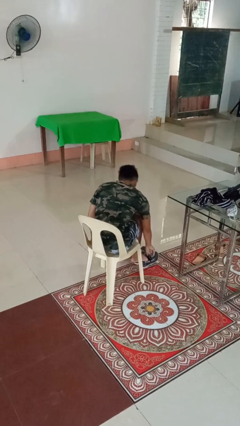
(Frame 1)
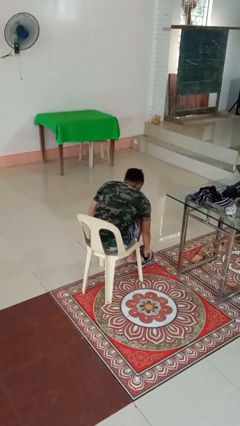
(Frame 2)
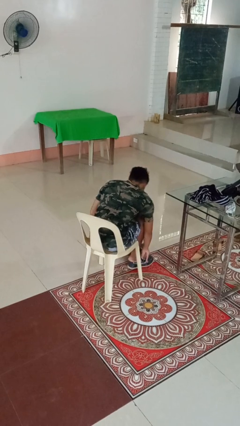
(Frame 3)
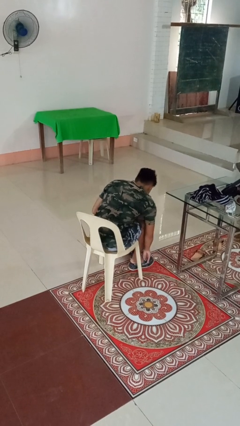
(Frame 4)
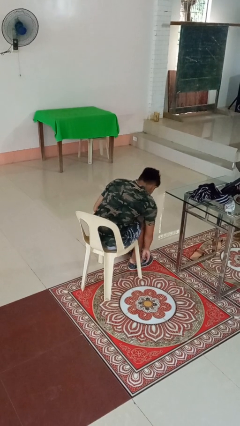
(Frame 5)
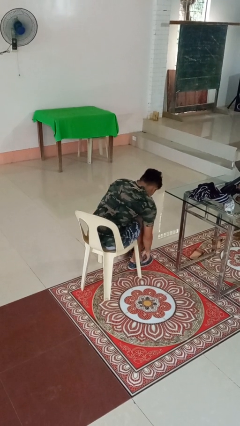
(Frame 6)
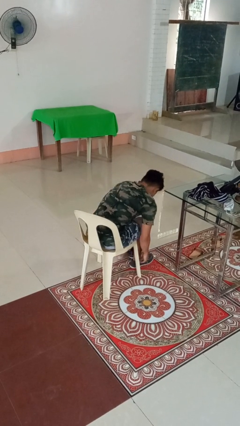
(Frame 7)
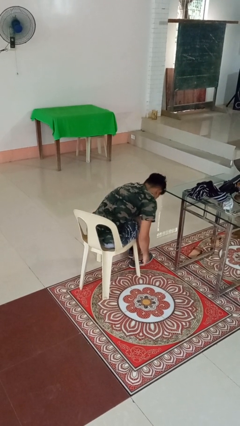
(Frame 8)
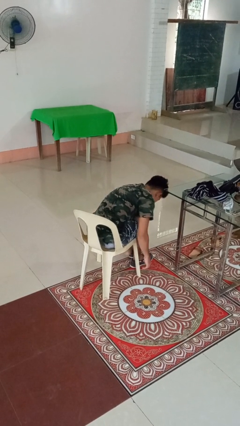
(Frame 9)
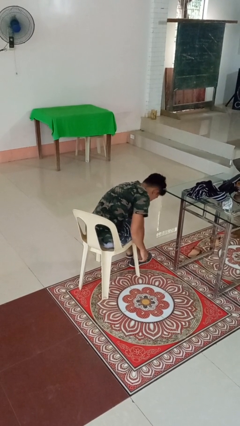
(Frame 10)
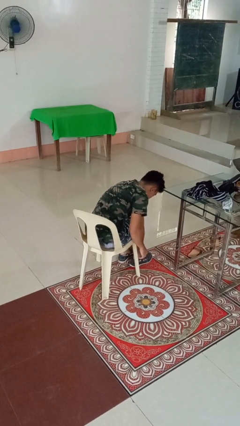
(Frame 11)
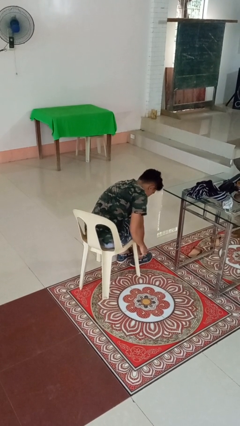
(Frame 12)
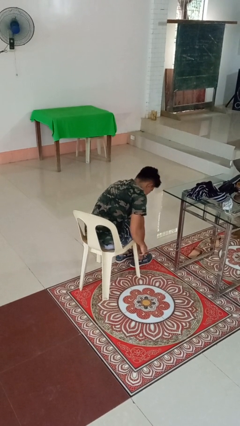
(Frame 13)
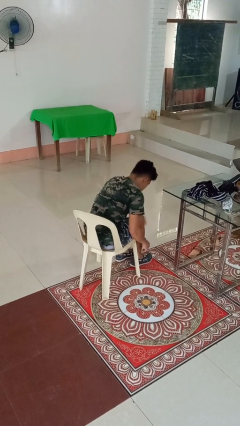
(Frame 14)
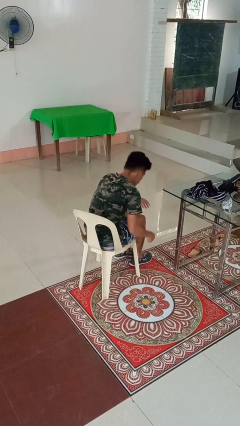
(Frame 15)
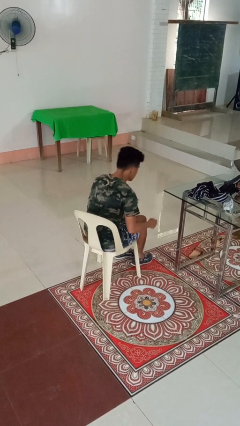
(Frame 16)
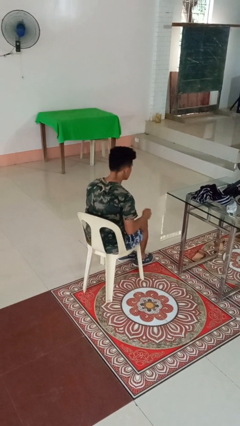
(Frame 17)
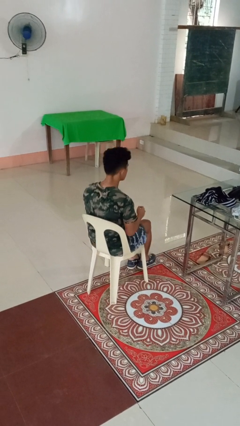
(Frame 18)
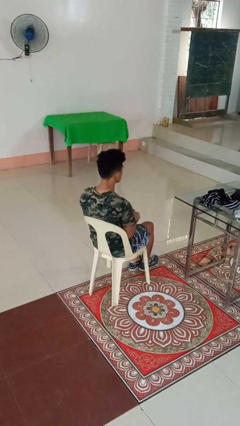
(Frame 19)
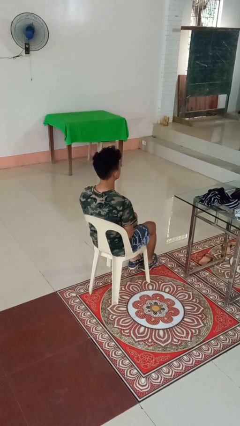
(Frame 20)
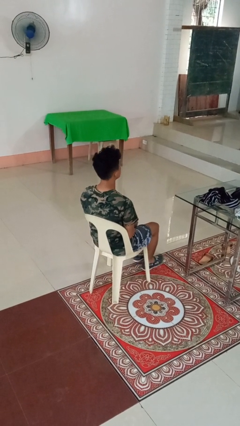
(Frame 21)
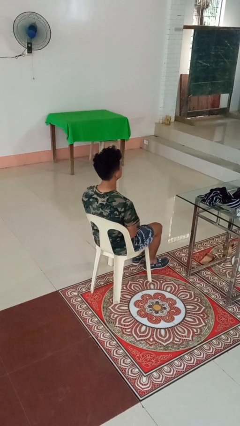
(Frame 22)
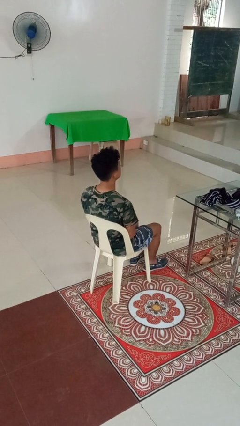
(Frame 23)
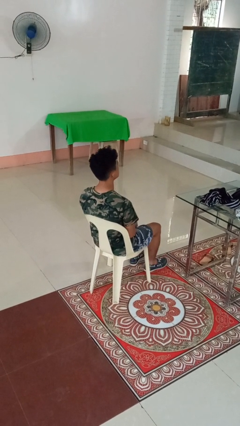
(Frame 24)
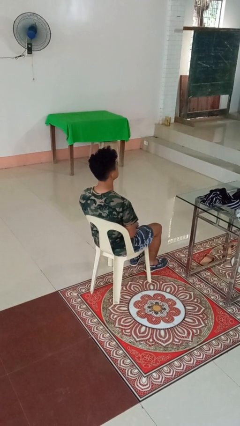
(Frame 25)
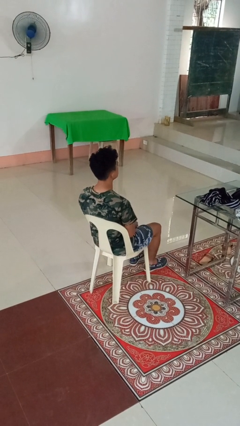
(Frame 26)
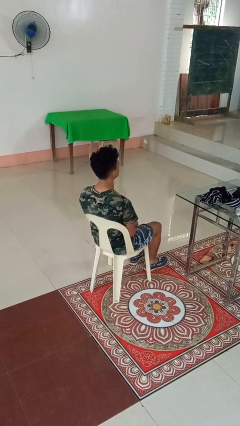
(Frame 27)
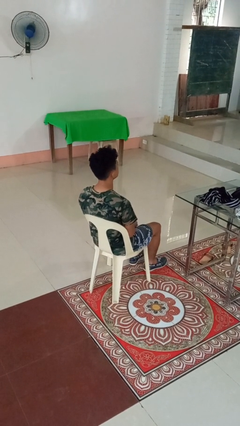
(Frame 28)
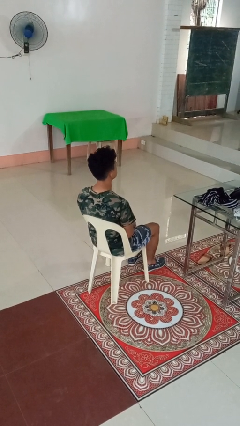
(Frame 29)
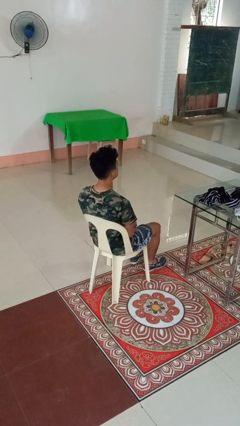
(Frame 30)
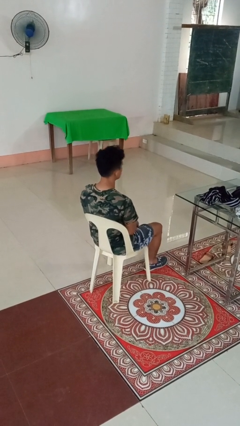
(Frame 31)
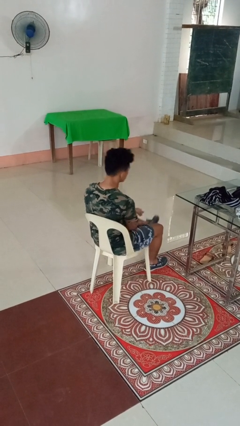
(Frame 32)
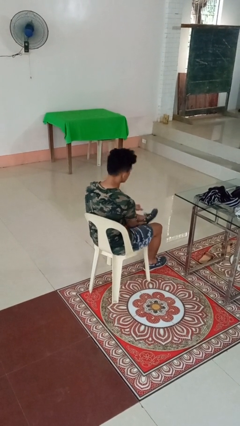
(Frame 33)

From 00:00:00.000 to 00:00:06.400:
person puts on shoes

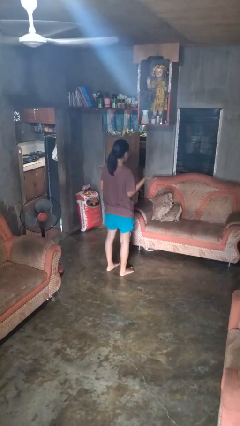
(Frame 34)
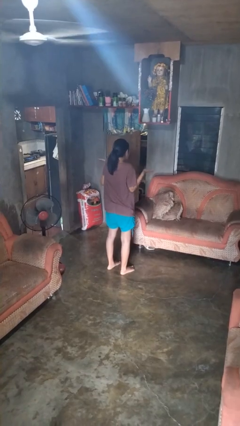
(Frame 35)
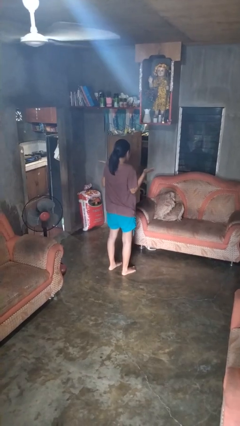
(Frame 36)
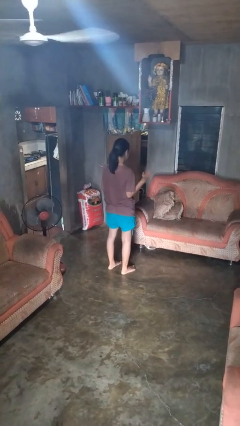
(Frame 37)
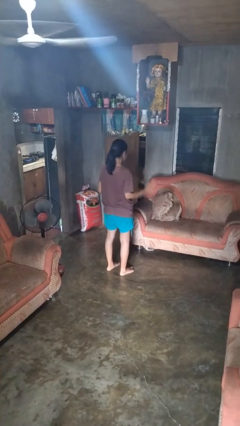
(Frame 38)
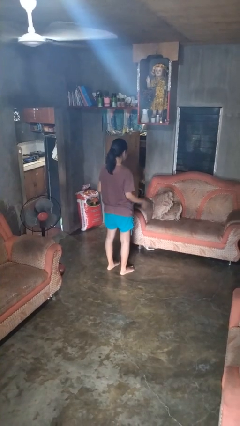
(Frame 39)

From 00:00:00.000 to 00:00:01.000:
person shrugs

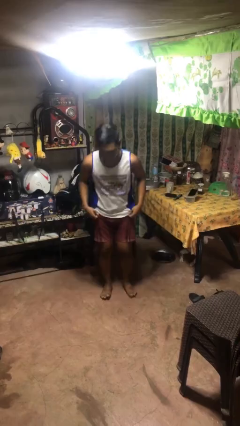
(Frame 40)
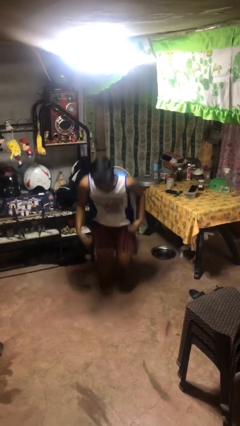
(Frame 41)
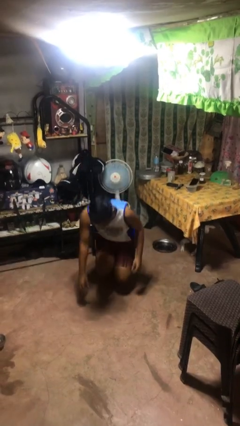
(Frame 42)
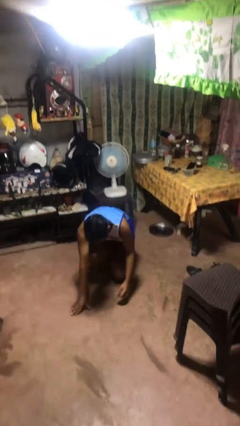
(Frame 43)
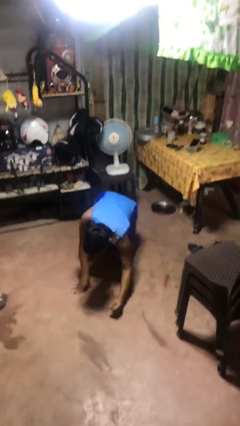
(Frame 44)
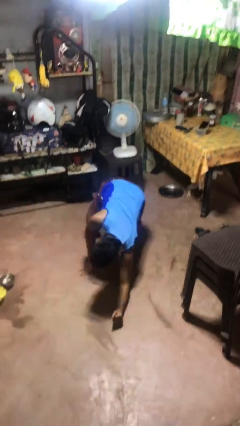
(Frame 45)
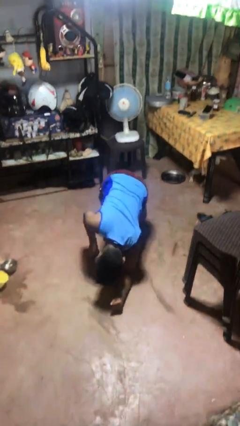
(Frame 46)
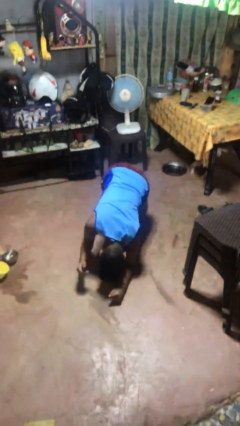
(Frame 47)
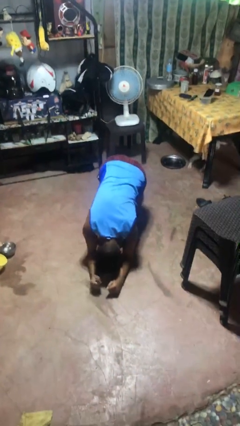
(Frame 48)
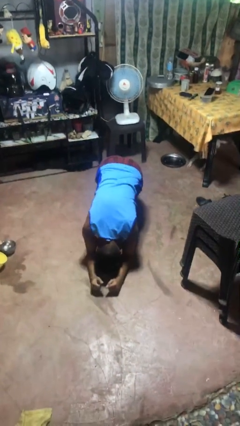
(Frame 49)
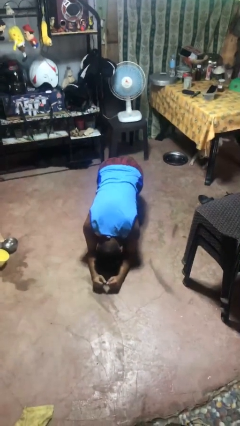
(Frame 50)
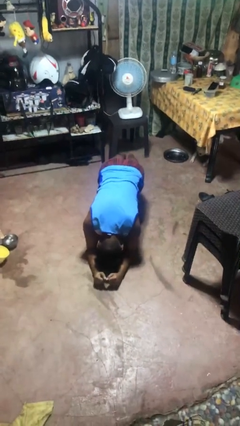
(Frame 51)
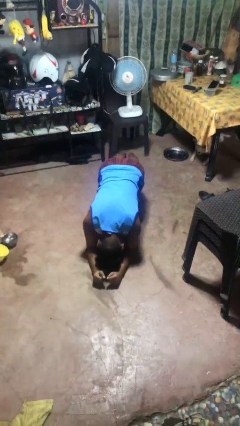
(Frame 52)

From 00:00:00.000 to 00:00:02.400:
person exercises with plank

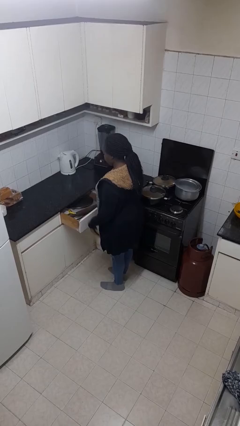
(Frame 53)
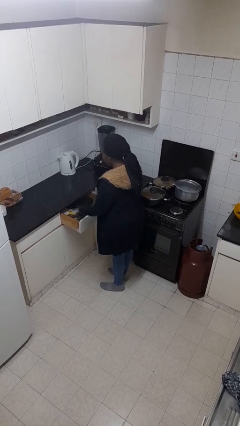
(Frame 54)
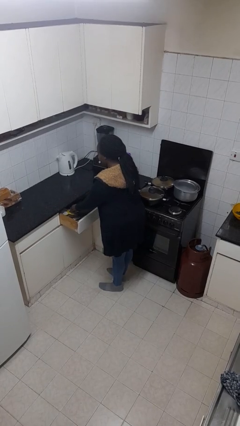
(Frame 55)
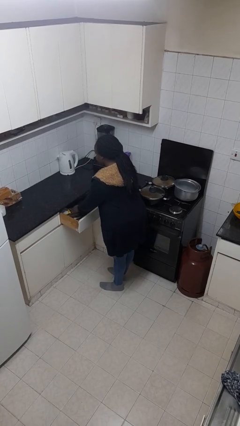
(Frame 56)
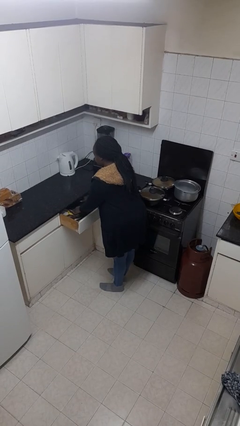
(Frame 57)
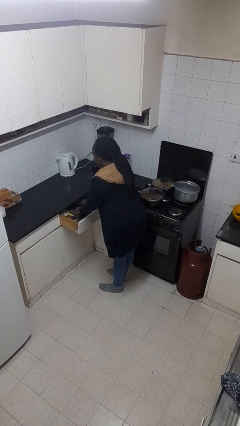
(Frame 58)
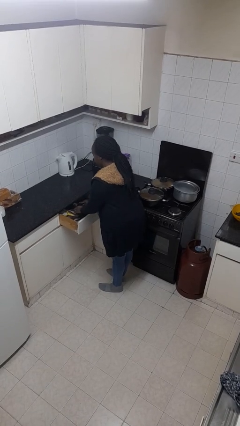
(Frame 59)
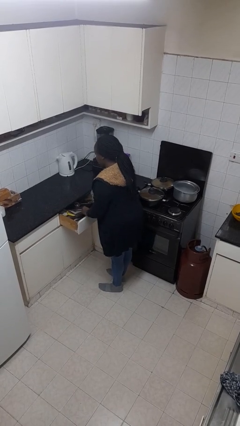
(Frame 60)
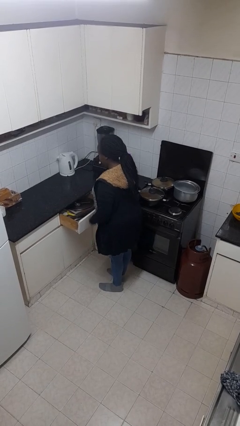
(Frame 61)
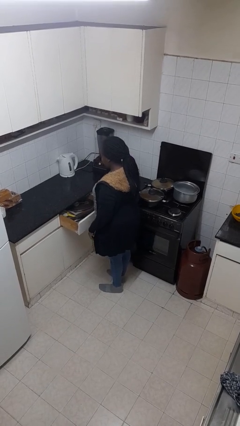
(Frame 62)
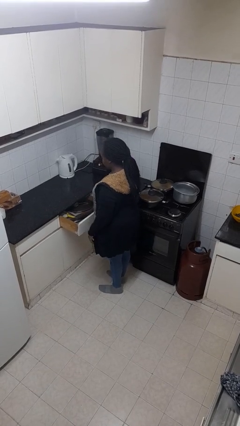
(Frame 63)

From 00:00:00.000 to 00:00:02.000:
person searches in kitchen drawer

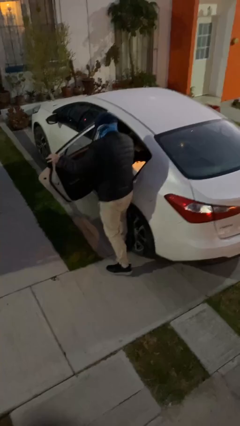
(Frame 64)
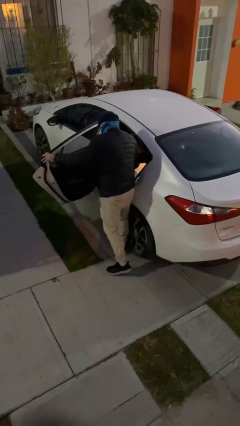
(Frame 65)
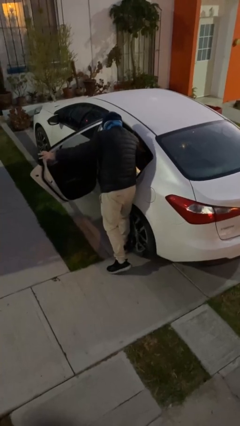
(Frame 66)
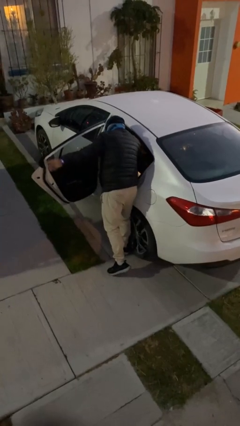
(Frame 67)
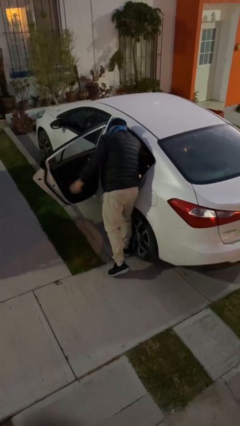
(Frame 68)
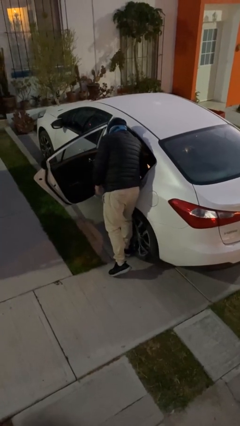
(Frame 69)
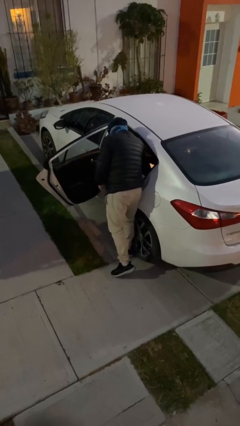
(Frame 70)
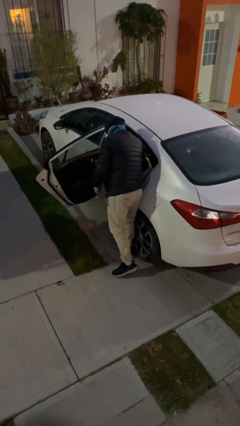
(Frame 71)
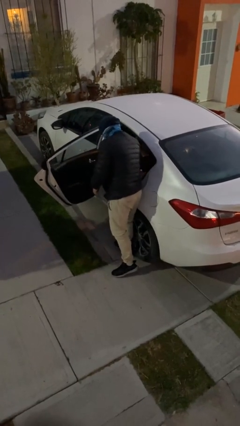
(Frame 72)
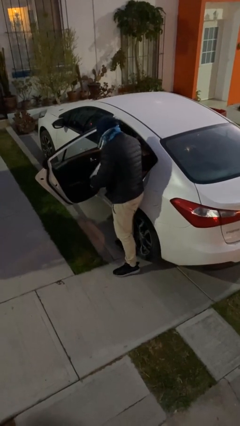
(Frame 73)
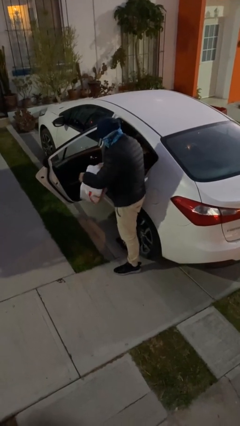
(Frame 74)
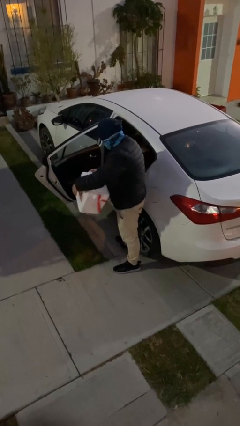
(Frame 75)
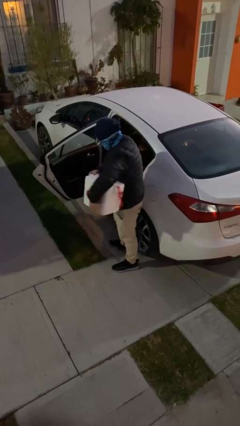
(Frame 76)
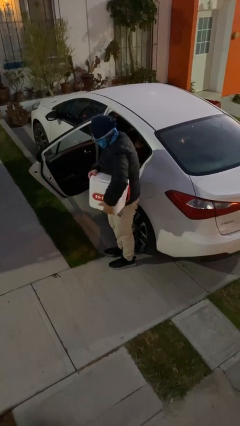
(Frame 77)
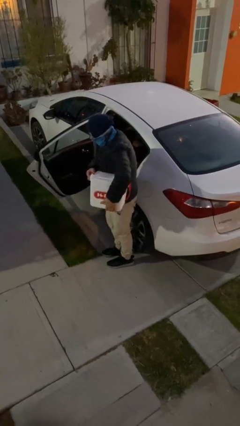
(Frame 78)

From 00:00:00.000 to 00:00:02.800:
person unloads car

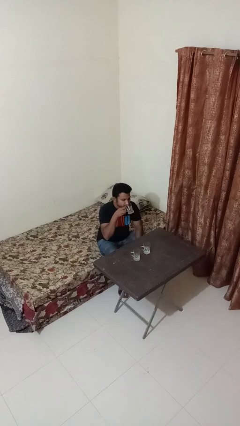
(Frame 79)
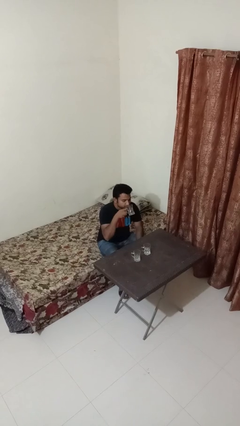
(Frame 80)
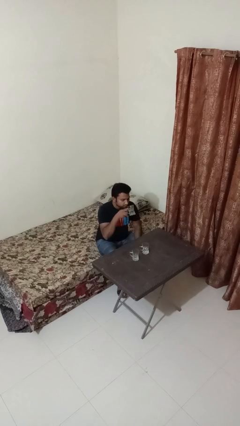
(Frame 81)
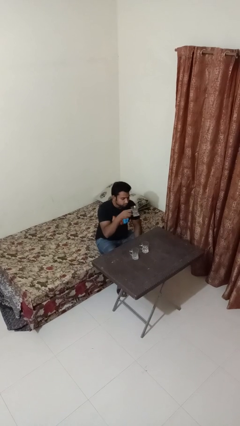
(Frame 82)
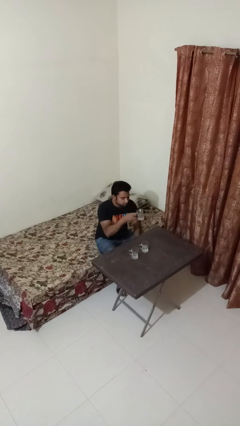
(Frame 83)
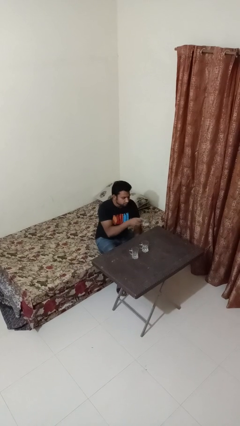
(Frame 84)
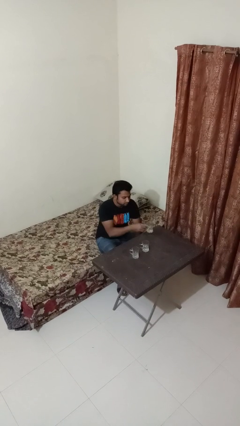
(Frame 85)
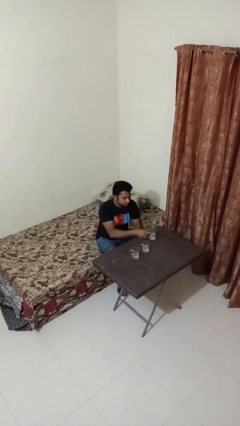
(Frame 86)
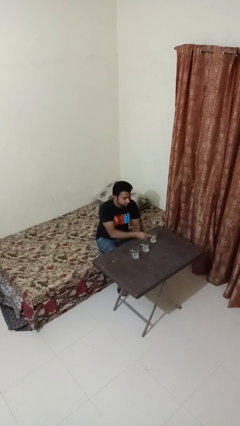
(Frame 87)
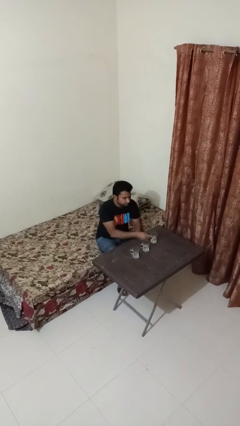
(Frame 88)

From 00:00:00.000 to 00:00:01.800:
person puts down object on table

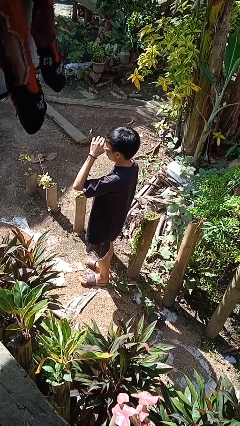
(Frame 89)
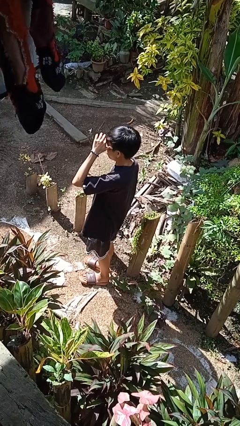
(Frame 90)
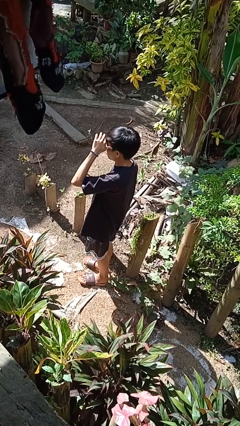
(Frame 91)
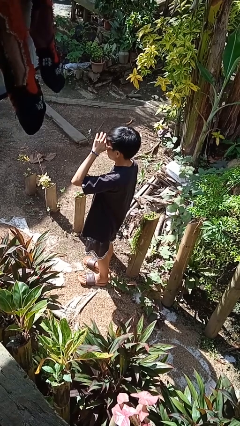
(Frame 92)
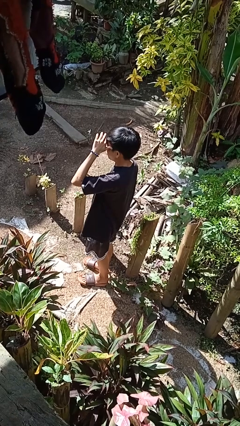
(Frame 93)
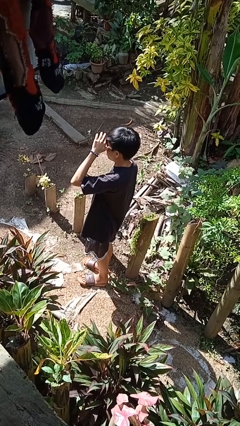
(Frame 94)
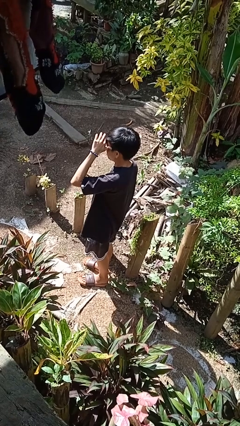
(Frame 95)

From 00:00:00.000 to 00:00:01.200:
person shades eyes
